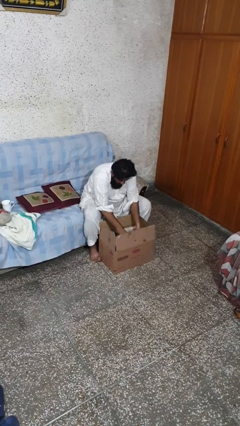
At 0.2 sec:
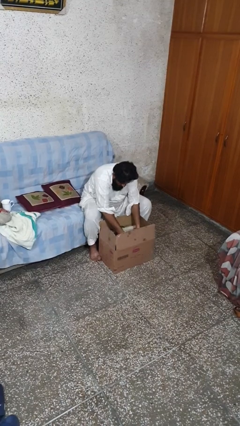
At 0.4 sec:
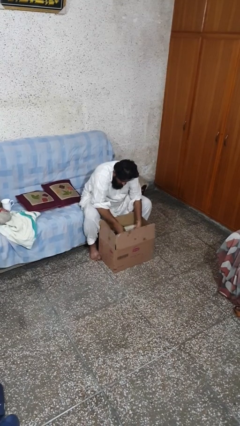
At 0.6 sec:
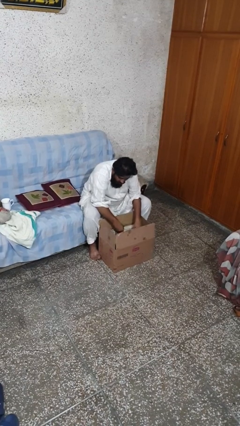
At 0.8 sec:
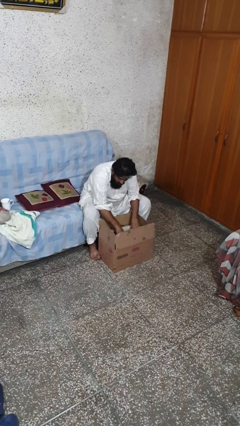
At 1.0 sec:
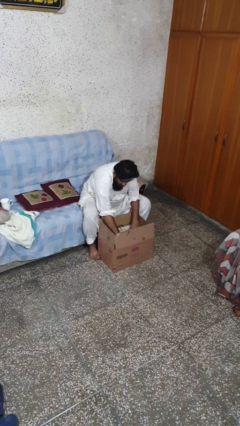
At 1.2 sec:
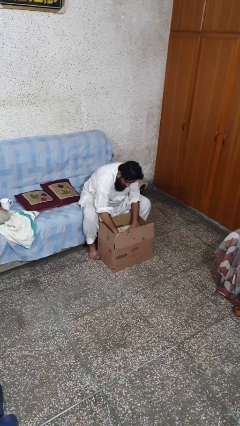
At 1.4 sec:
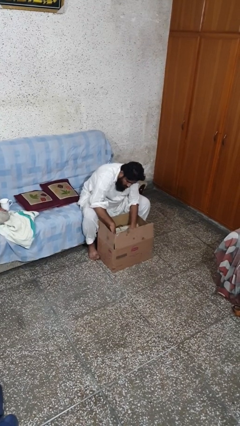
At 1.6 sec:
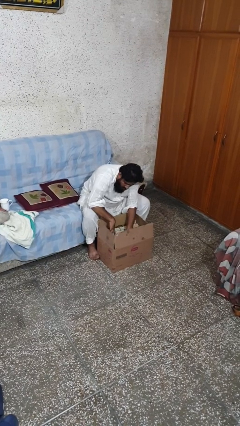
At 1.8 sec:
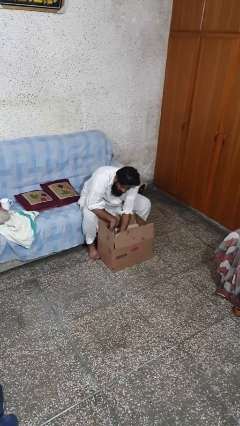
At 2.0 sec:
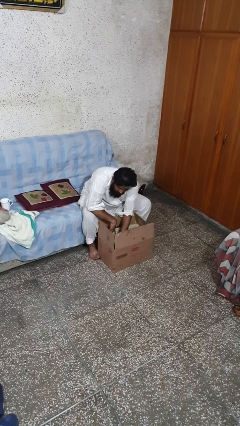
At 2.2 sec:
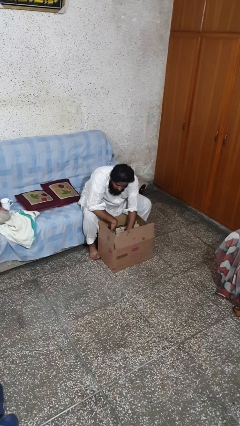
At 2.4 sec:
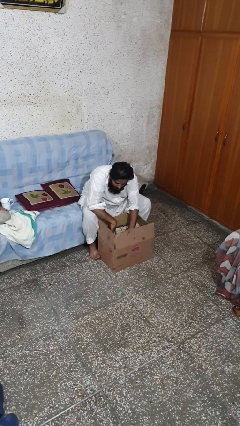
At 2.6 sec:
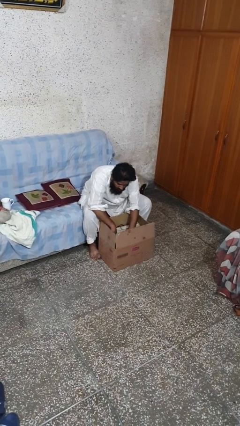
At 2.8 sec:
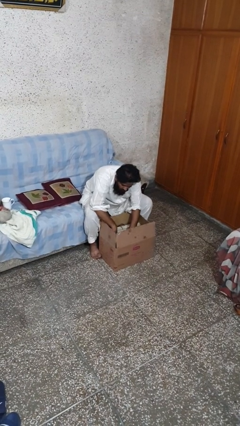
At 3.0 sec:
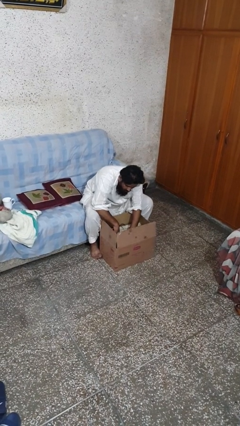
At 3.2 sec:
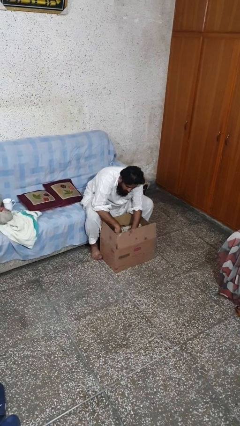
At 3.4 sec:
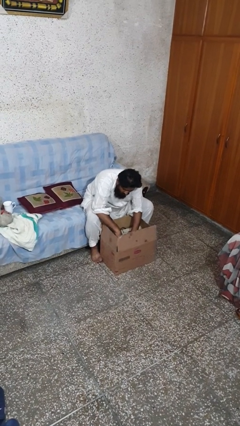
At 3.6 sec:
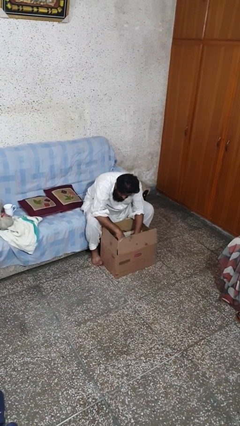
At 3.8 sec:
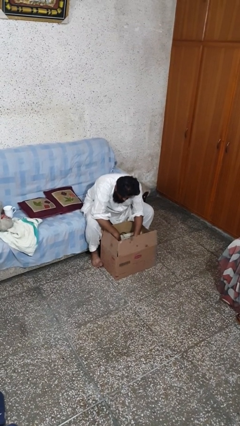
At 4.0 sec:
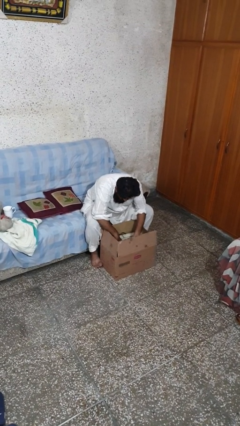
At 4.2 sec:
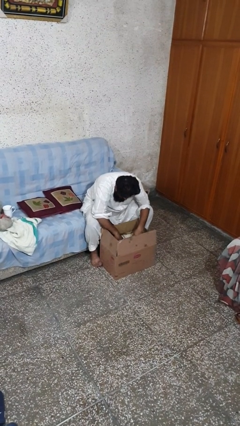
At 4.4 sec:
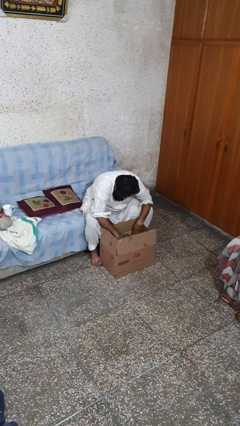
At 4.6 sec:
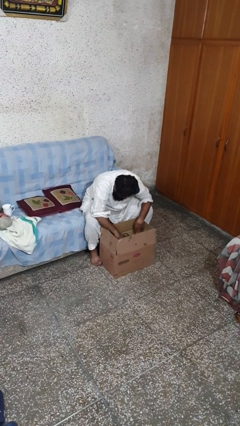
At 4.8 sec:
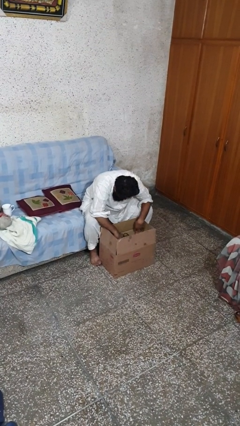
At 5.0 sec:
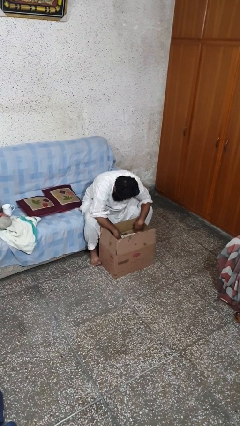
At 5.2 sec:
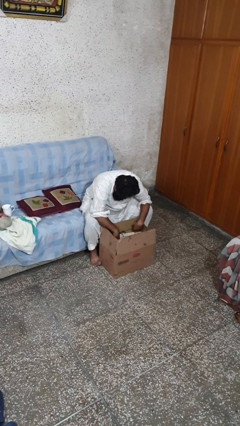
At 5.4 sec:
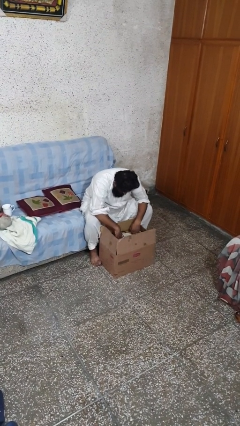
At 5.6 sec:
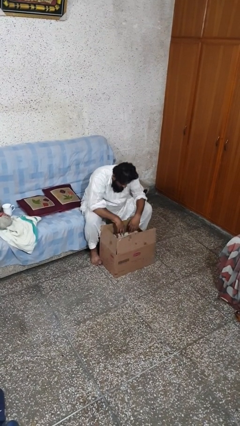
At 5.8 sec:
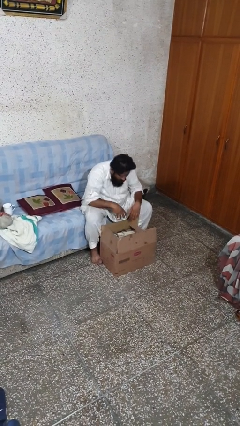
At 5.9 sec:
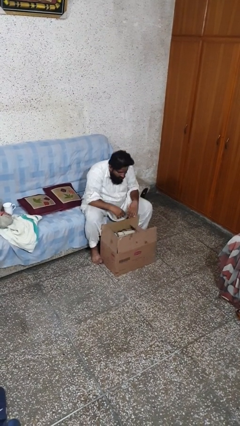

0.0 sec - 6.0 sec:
person searches in box

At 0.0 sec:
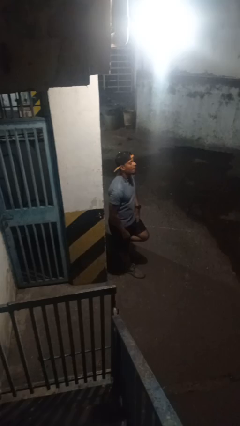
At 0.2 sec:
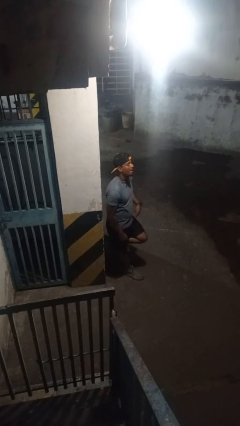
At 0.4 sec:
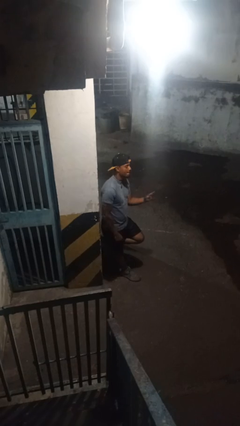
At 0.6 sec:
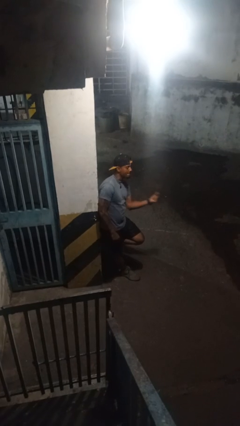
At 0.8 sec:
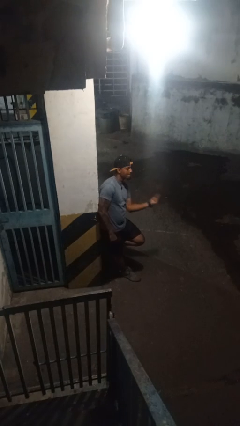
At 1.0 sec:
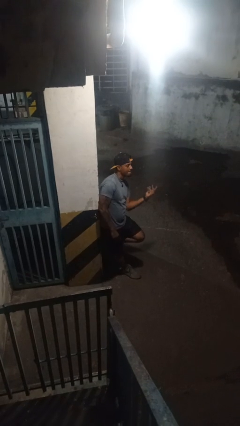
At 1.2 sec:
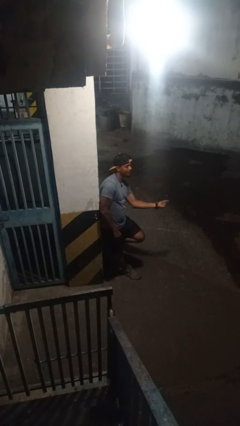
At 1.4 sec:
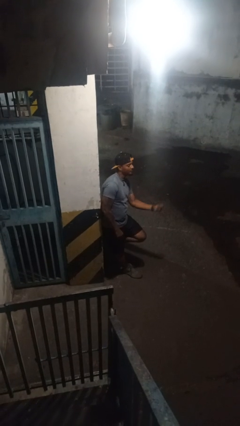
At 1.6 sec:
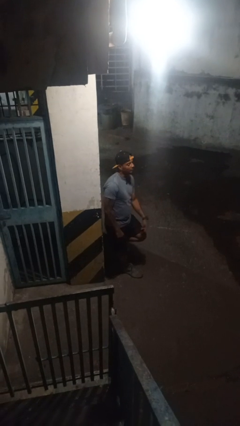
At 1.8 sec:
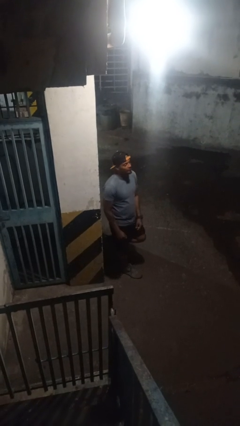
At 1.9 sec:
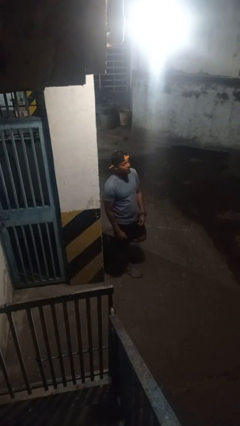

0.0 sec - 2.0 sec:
person snaps fingers

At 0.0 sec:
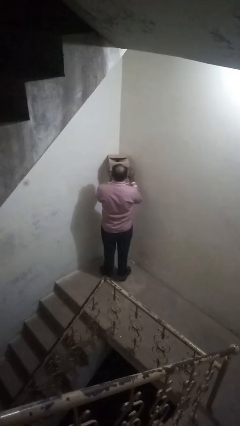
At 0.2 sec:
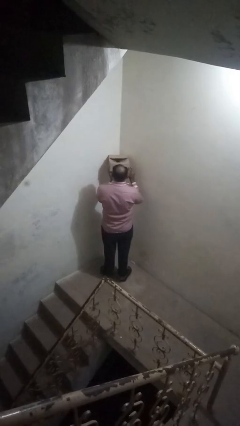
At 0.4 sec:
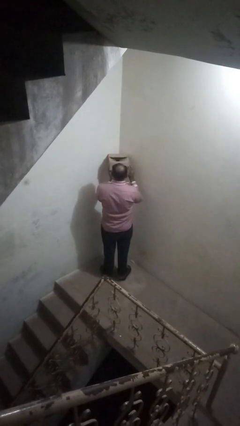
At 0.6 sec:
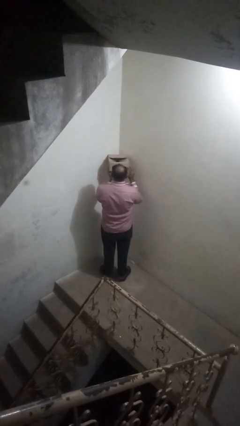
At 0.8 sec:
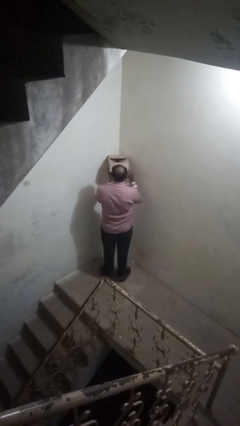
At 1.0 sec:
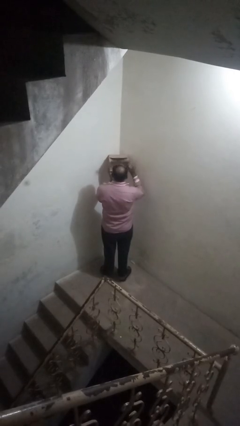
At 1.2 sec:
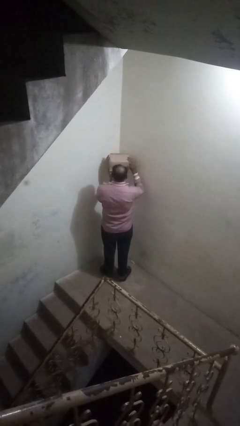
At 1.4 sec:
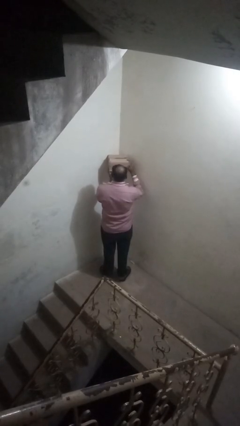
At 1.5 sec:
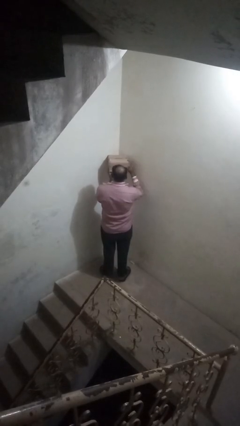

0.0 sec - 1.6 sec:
person closes mailbox

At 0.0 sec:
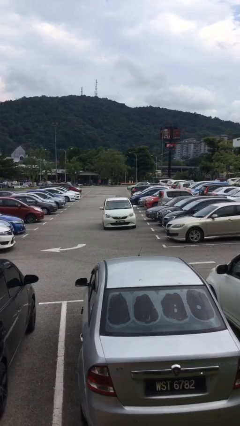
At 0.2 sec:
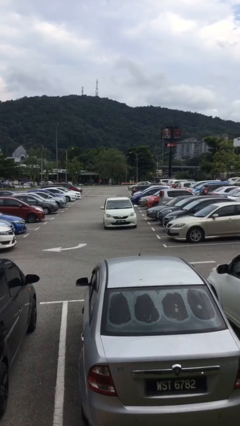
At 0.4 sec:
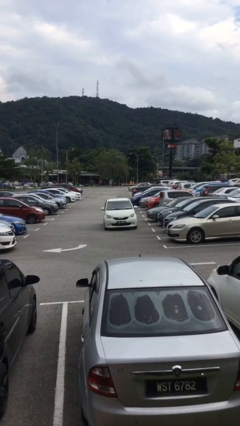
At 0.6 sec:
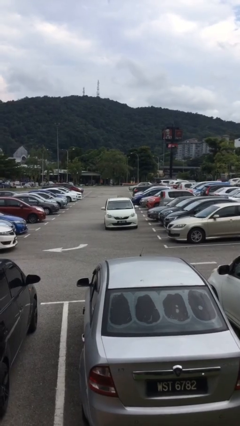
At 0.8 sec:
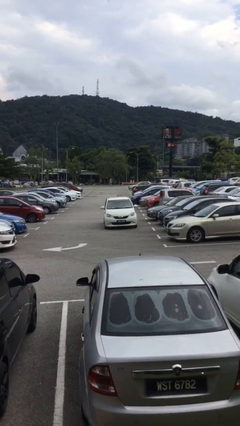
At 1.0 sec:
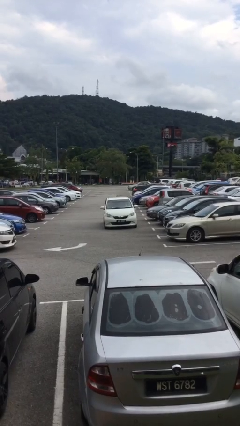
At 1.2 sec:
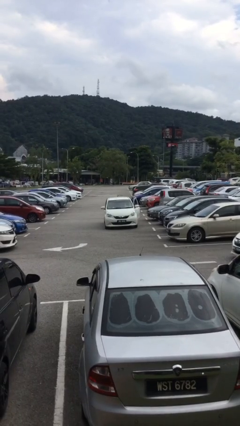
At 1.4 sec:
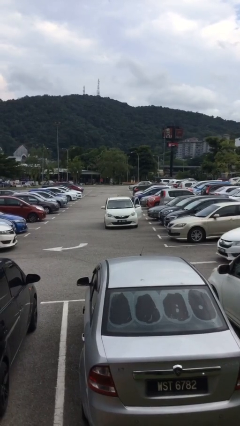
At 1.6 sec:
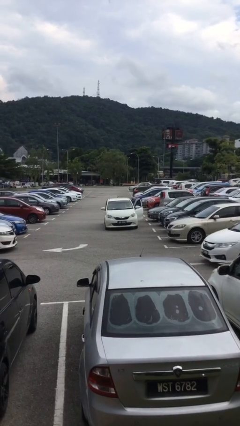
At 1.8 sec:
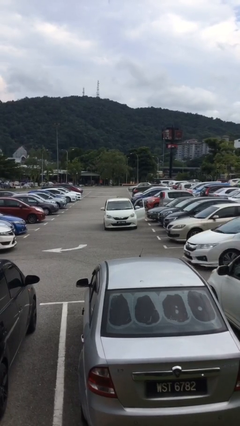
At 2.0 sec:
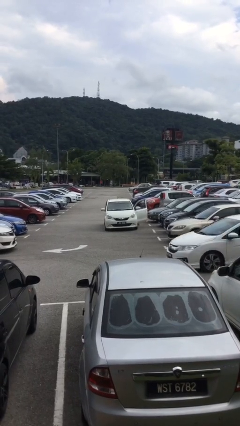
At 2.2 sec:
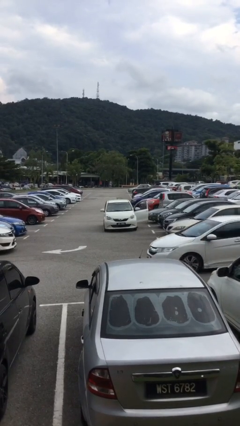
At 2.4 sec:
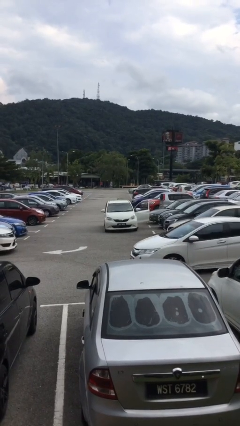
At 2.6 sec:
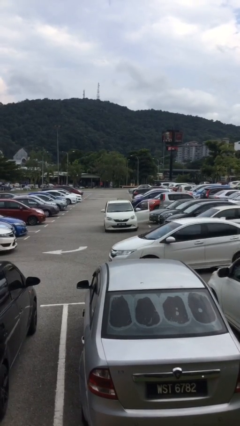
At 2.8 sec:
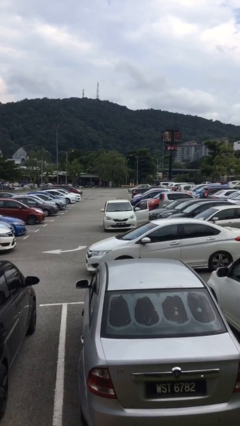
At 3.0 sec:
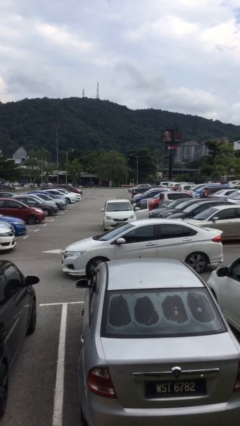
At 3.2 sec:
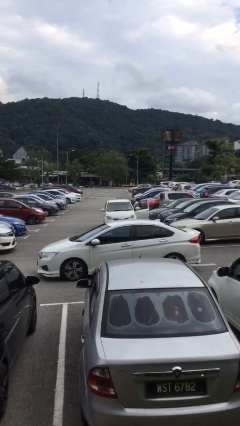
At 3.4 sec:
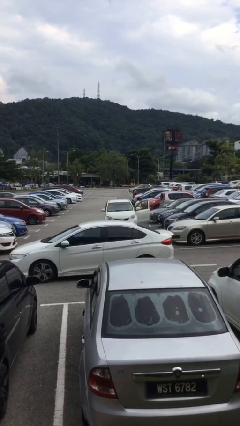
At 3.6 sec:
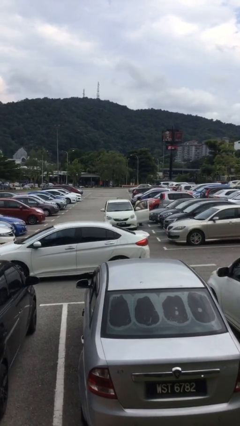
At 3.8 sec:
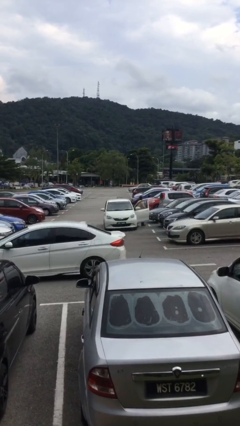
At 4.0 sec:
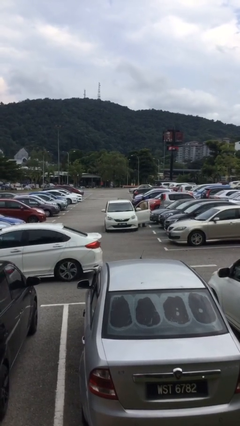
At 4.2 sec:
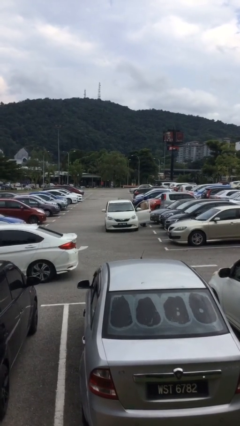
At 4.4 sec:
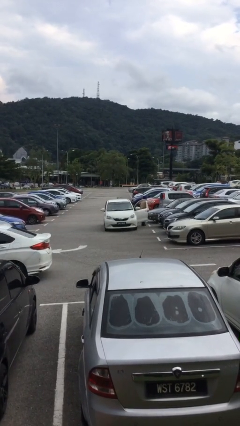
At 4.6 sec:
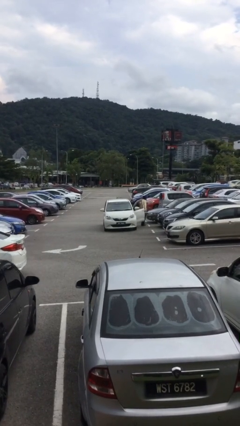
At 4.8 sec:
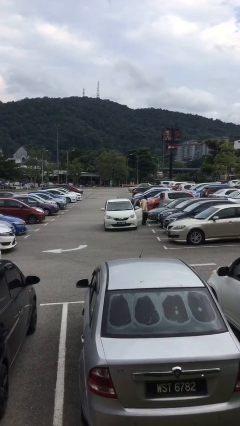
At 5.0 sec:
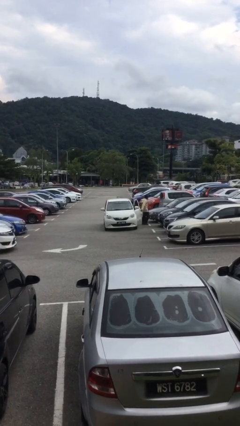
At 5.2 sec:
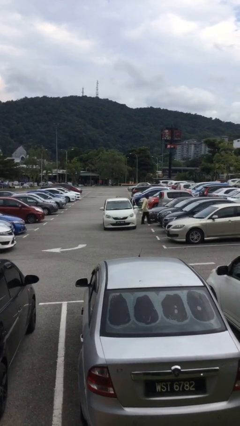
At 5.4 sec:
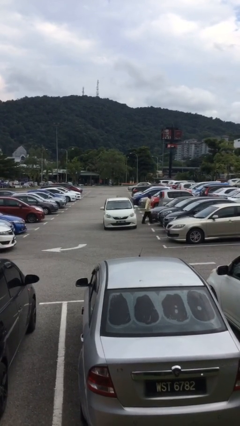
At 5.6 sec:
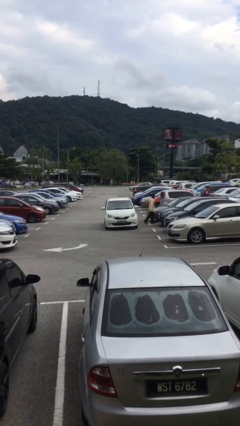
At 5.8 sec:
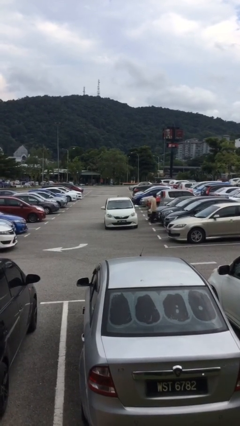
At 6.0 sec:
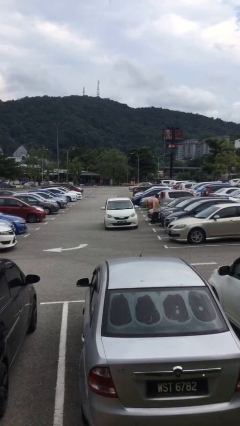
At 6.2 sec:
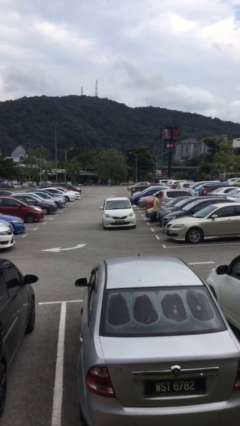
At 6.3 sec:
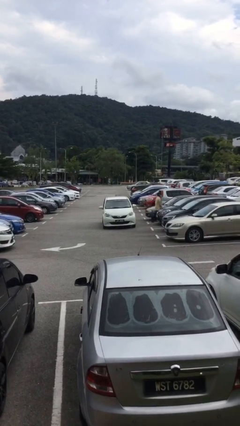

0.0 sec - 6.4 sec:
car drops off person

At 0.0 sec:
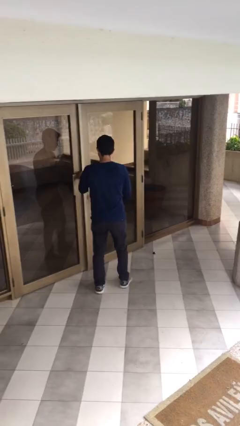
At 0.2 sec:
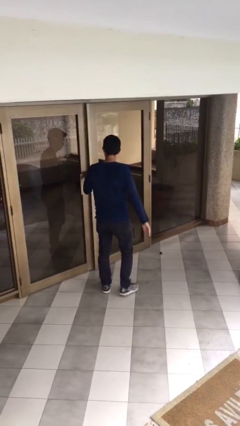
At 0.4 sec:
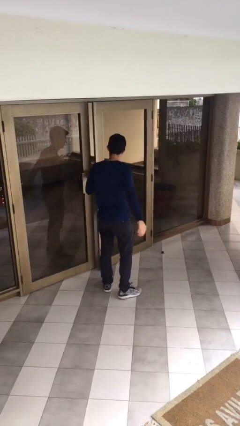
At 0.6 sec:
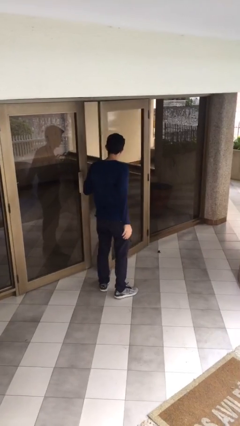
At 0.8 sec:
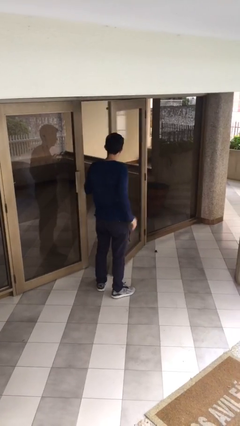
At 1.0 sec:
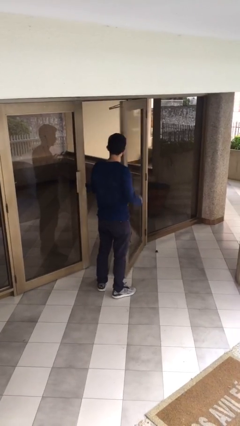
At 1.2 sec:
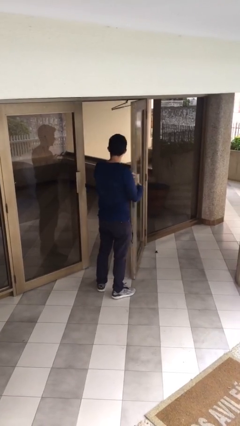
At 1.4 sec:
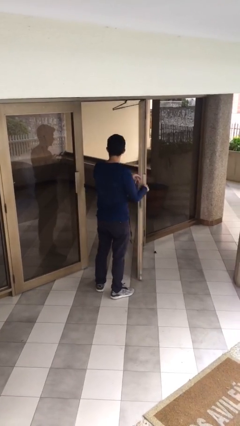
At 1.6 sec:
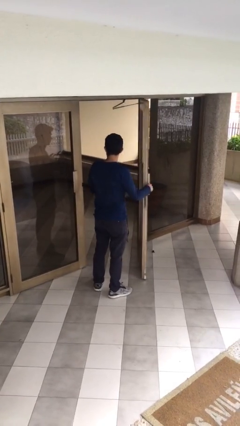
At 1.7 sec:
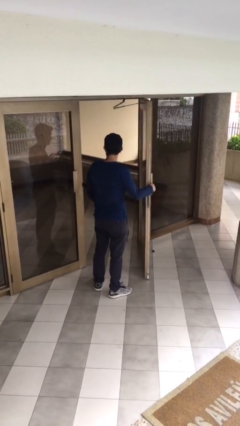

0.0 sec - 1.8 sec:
person opens facility door
